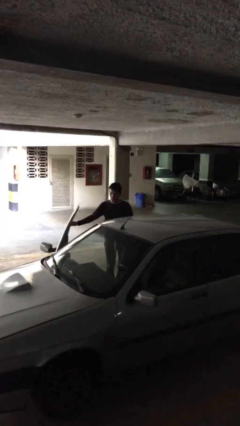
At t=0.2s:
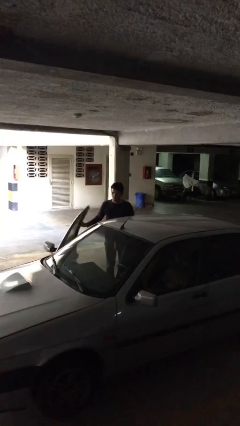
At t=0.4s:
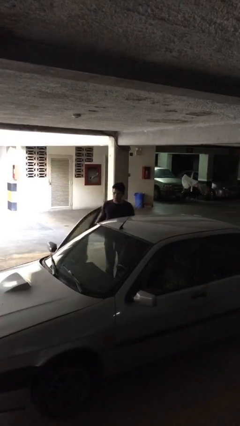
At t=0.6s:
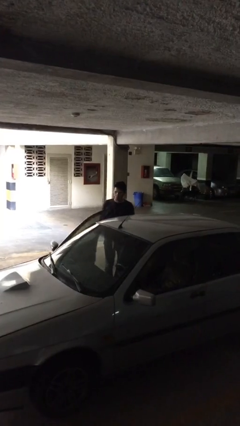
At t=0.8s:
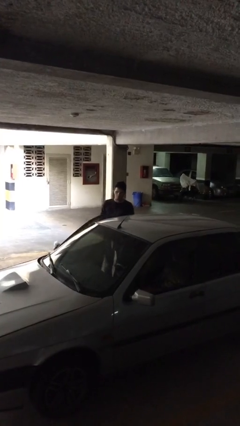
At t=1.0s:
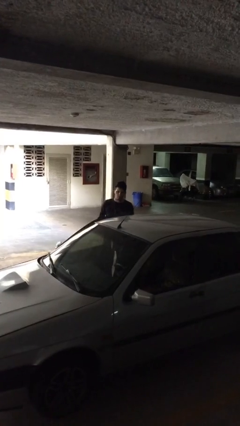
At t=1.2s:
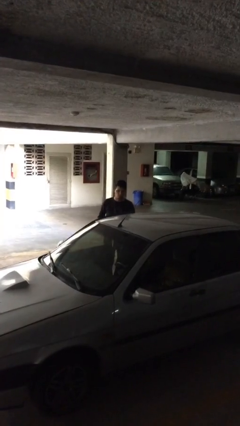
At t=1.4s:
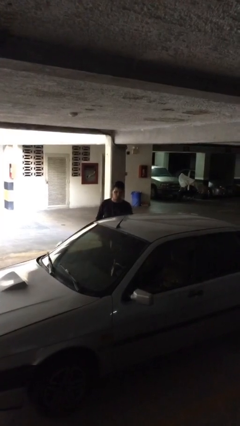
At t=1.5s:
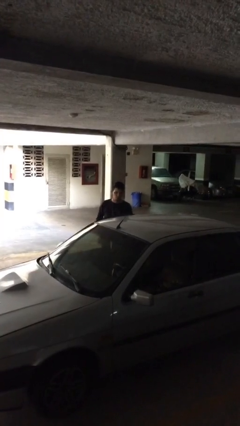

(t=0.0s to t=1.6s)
person closes car door

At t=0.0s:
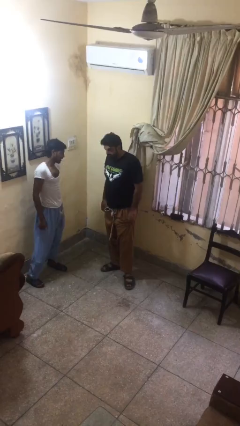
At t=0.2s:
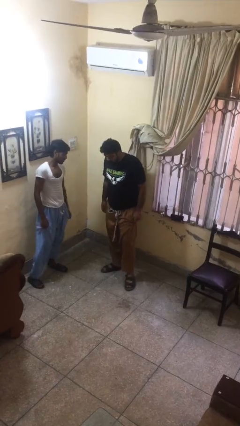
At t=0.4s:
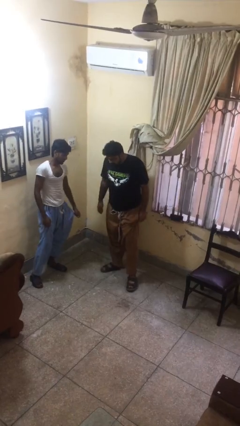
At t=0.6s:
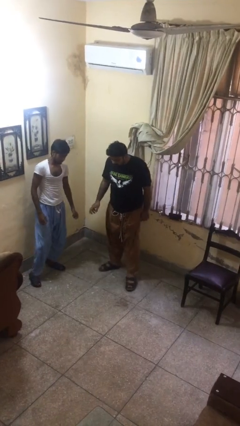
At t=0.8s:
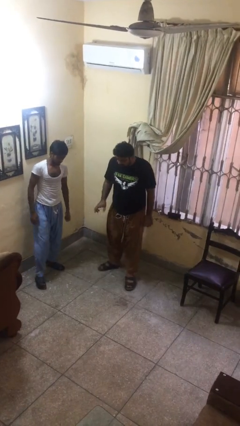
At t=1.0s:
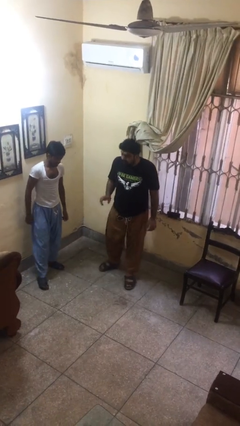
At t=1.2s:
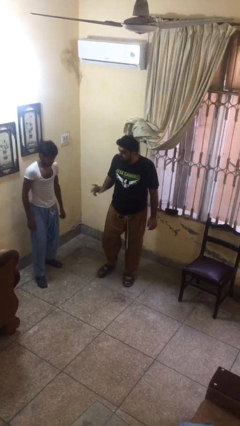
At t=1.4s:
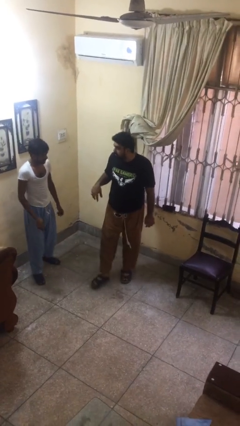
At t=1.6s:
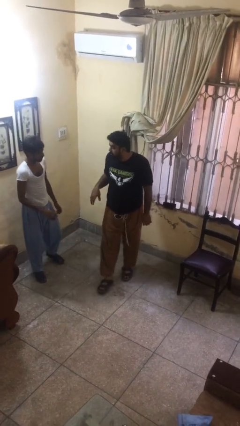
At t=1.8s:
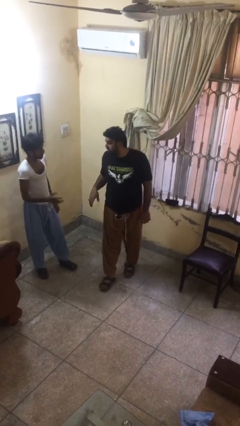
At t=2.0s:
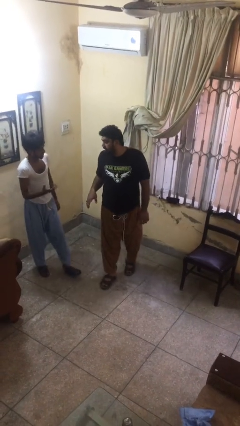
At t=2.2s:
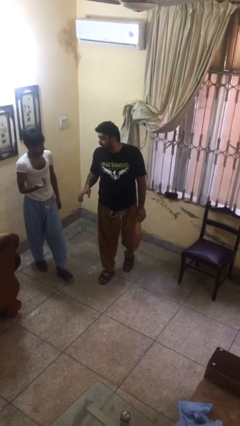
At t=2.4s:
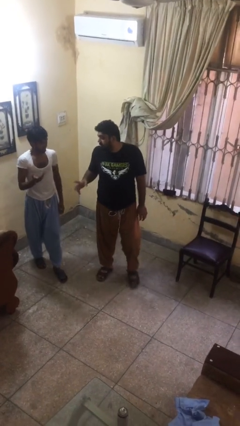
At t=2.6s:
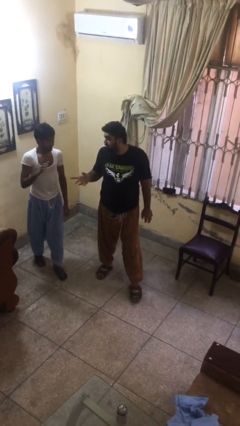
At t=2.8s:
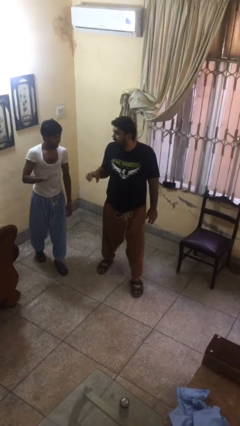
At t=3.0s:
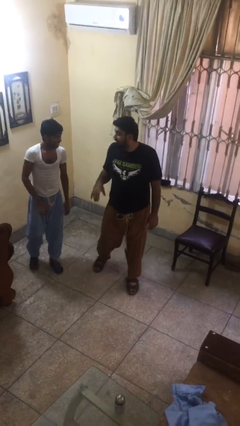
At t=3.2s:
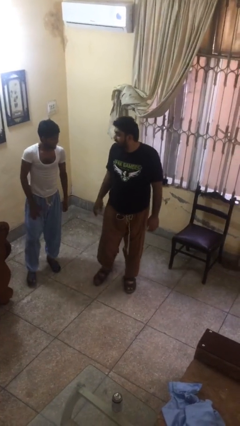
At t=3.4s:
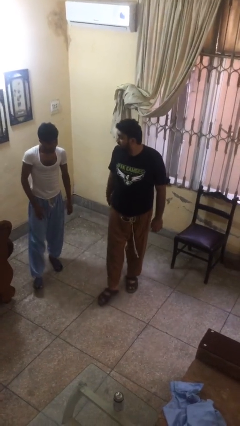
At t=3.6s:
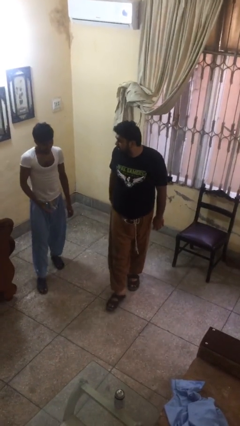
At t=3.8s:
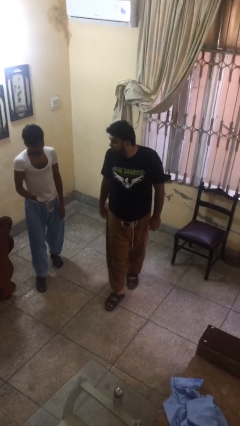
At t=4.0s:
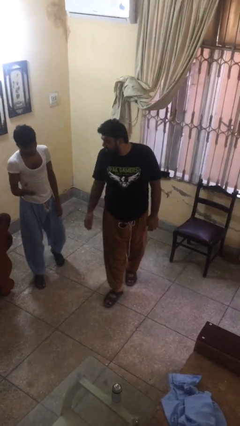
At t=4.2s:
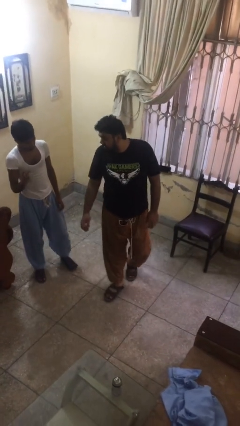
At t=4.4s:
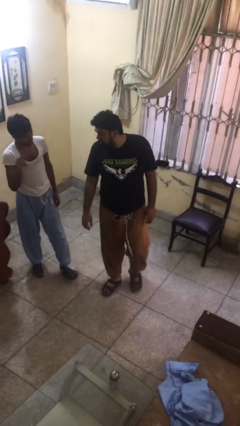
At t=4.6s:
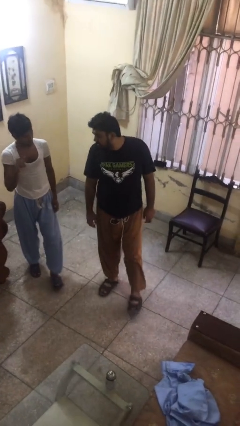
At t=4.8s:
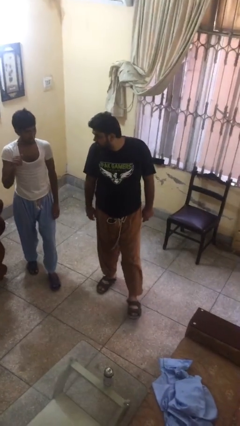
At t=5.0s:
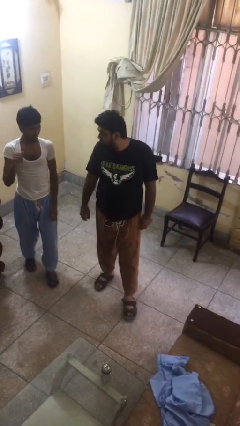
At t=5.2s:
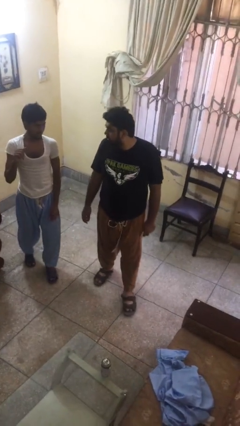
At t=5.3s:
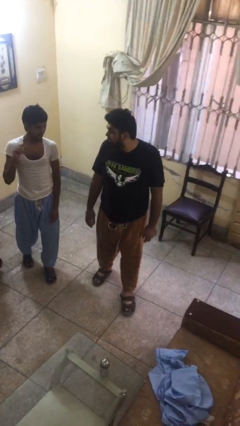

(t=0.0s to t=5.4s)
person talks to person

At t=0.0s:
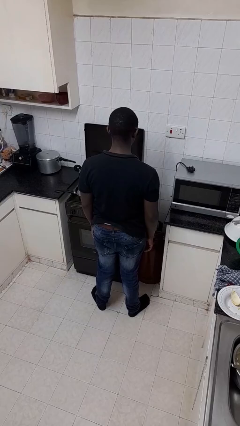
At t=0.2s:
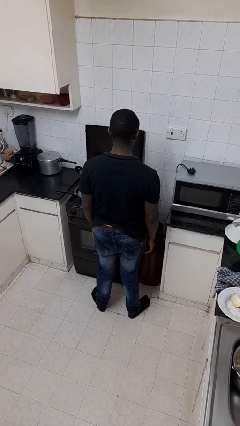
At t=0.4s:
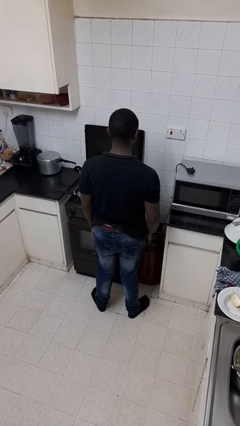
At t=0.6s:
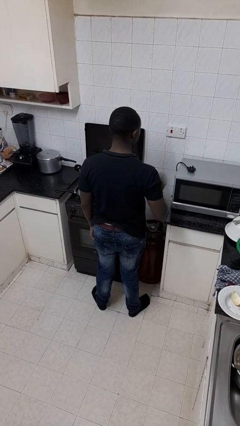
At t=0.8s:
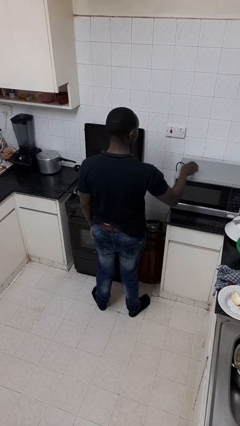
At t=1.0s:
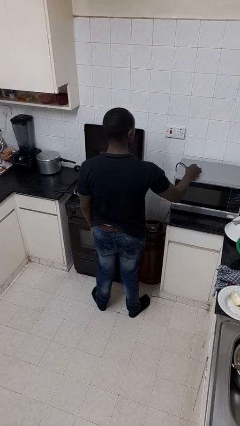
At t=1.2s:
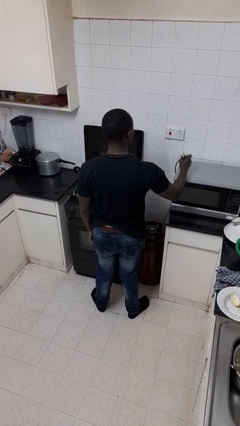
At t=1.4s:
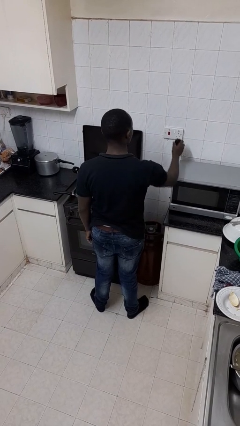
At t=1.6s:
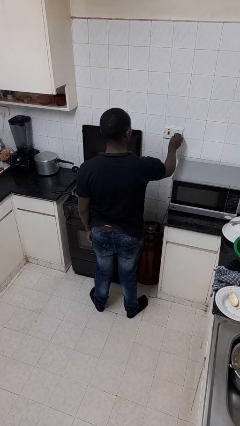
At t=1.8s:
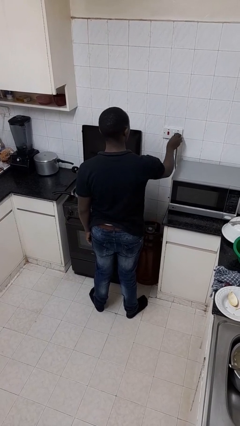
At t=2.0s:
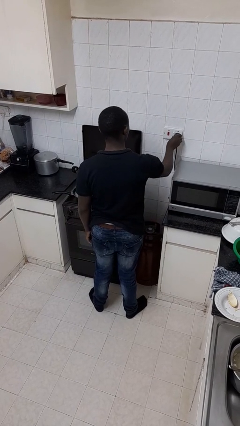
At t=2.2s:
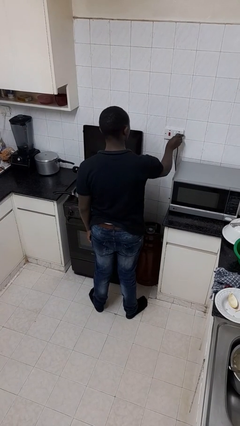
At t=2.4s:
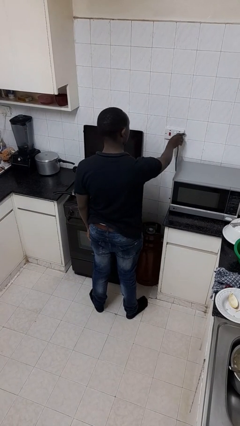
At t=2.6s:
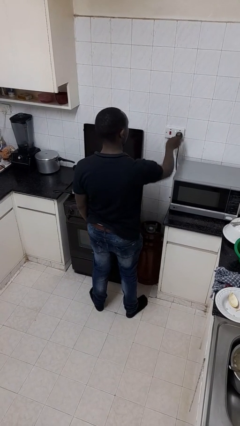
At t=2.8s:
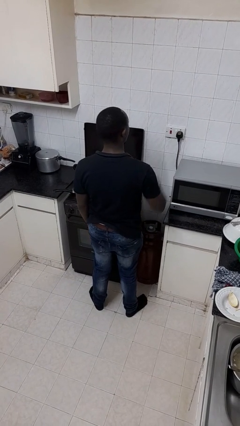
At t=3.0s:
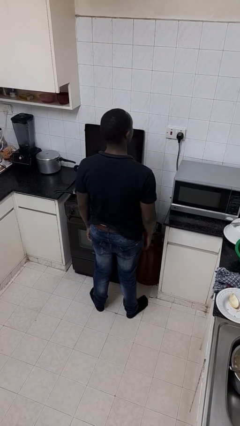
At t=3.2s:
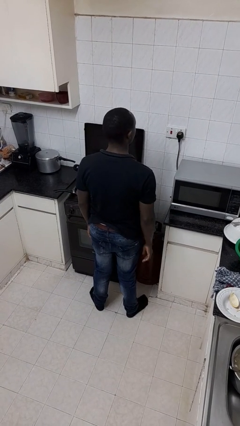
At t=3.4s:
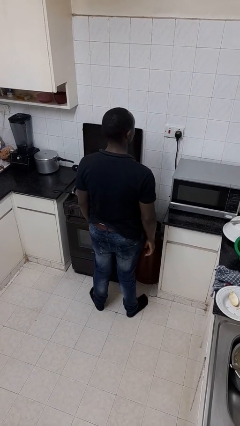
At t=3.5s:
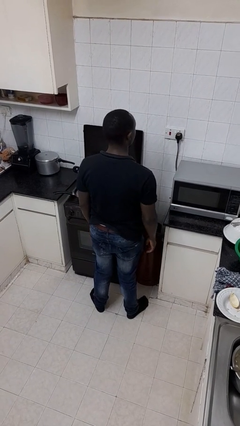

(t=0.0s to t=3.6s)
person plugs into electrical socket

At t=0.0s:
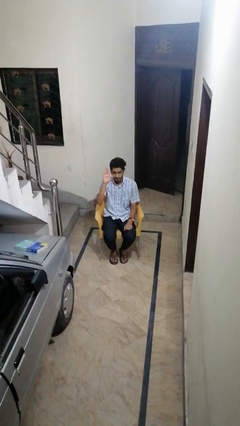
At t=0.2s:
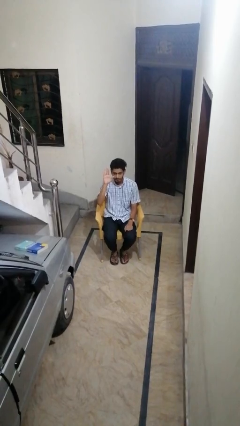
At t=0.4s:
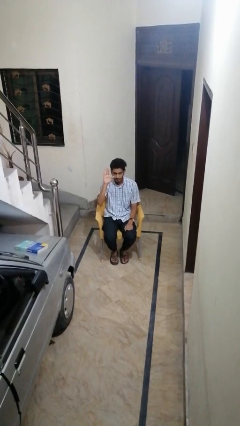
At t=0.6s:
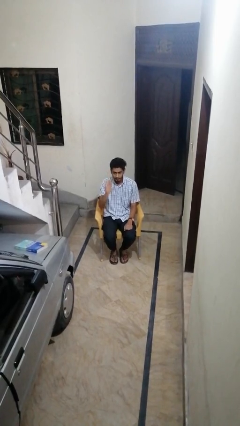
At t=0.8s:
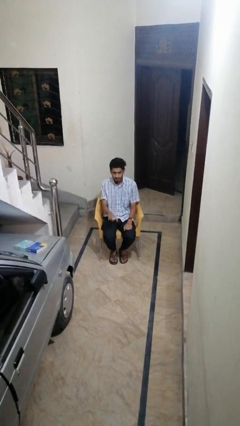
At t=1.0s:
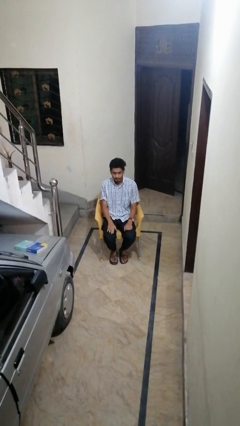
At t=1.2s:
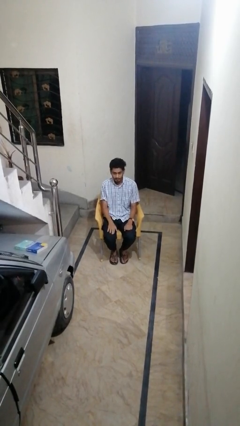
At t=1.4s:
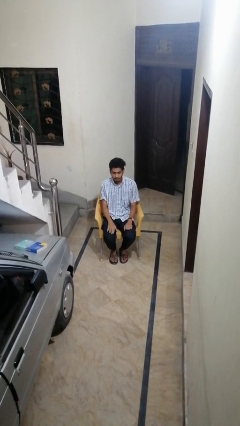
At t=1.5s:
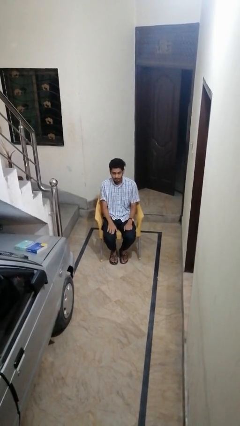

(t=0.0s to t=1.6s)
person gestures lower hand

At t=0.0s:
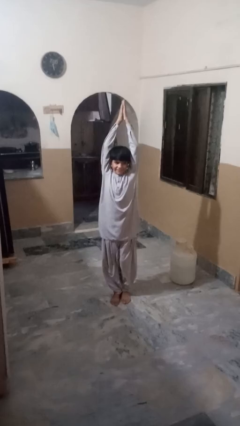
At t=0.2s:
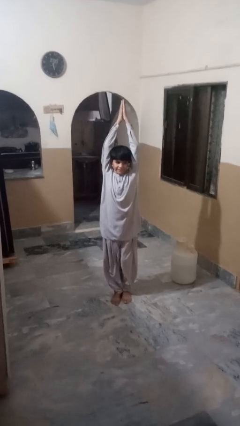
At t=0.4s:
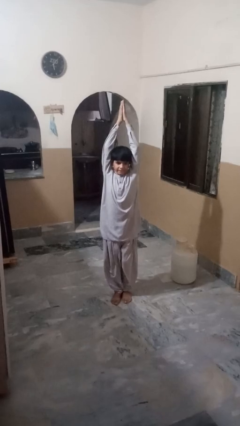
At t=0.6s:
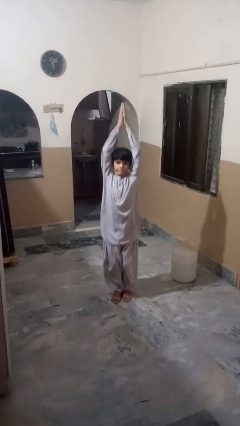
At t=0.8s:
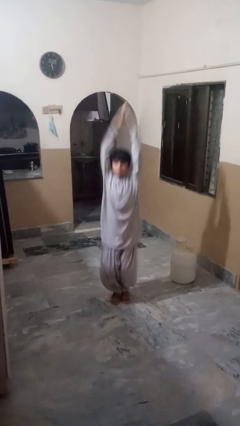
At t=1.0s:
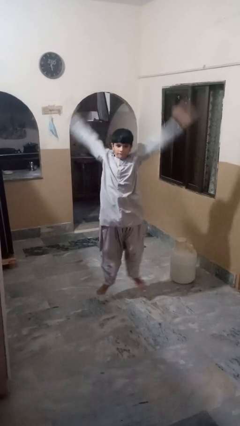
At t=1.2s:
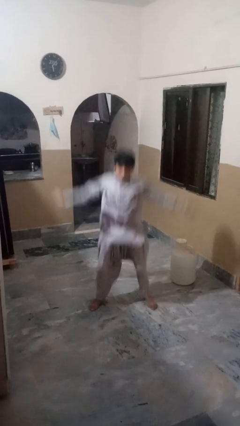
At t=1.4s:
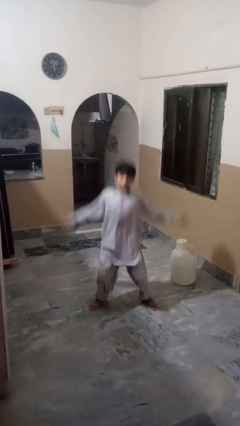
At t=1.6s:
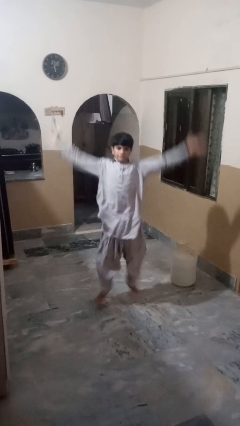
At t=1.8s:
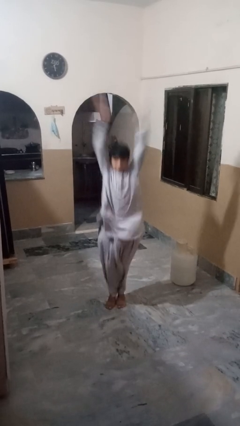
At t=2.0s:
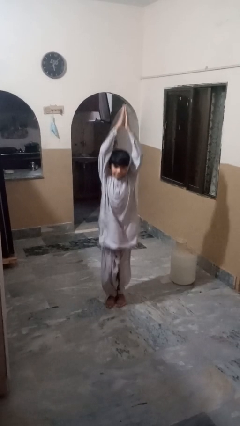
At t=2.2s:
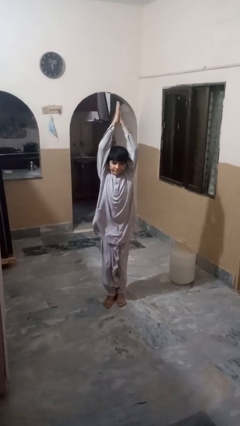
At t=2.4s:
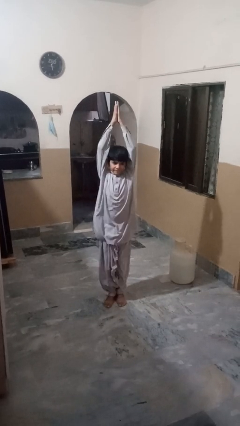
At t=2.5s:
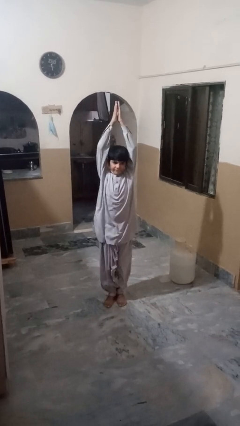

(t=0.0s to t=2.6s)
person exercises with jumping jacks

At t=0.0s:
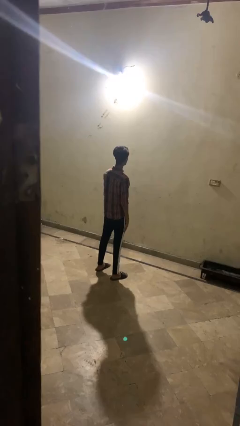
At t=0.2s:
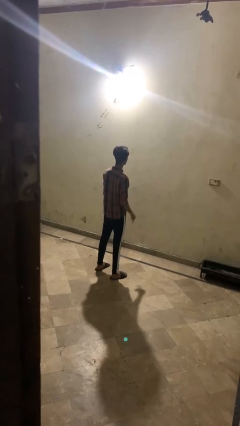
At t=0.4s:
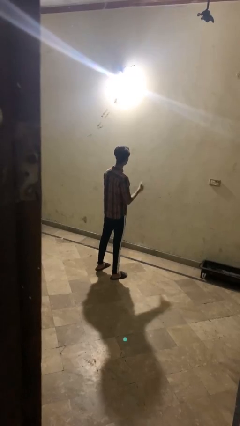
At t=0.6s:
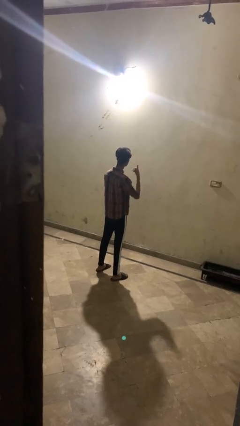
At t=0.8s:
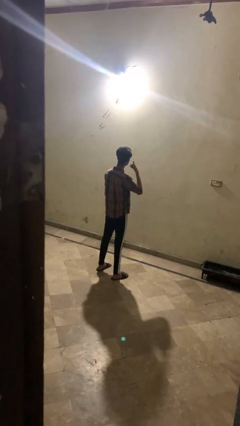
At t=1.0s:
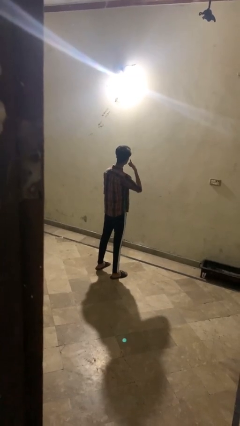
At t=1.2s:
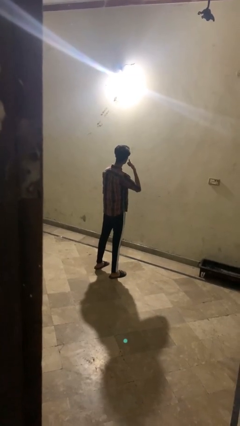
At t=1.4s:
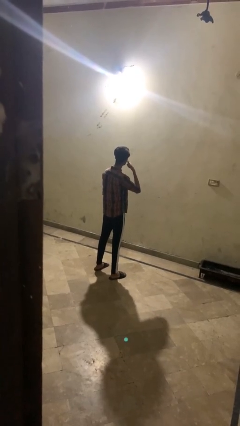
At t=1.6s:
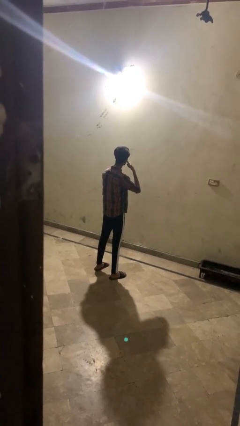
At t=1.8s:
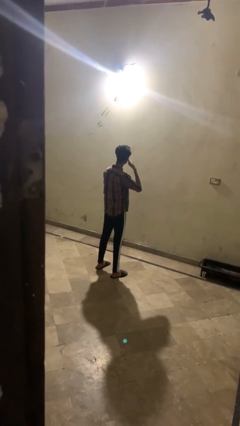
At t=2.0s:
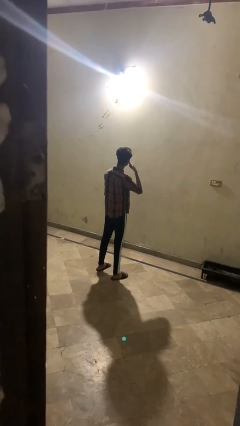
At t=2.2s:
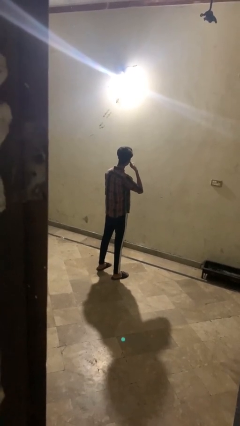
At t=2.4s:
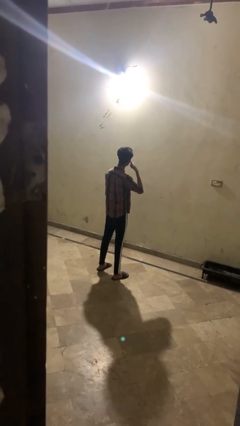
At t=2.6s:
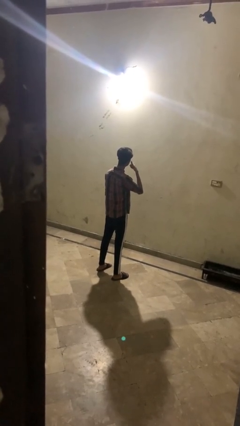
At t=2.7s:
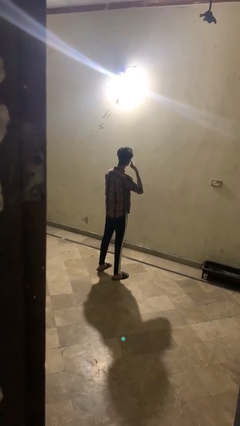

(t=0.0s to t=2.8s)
person gestures call me
